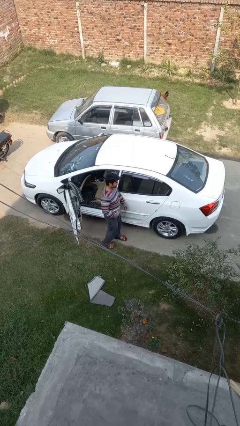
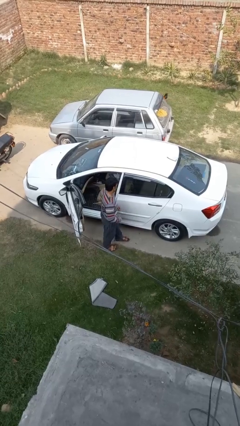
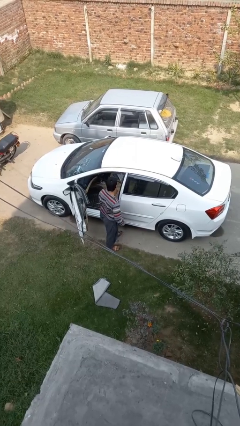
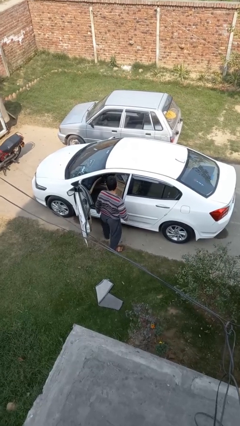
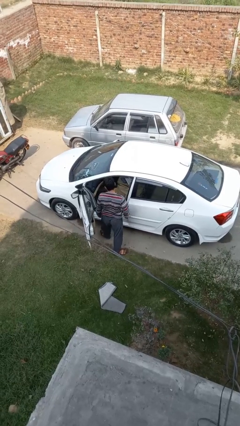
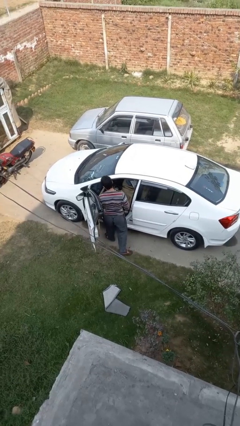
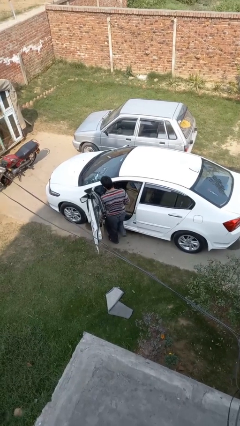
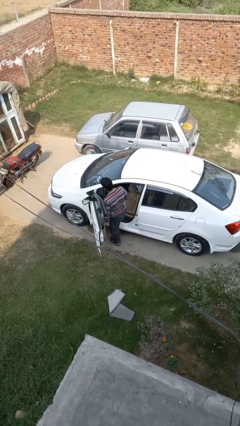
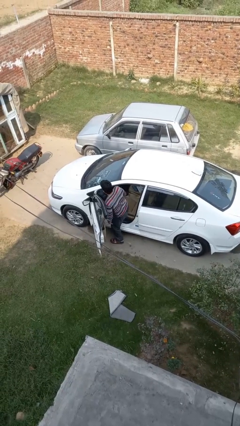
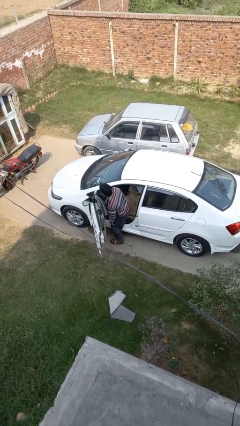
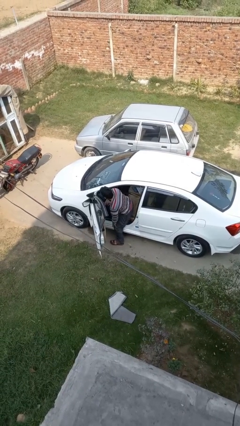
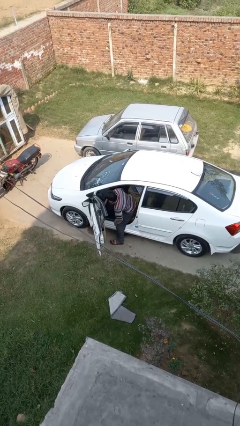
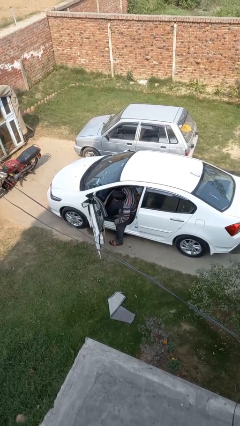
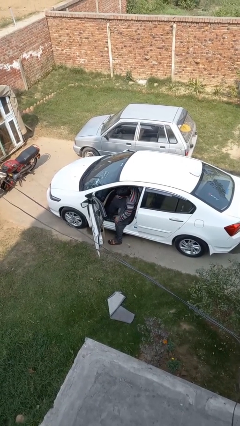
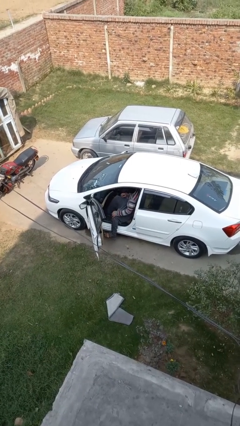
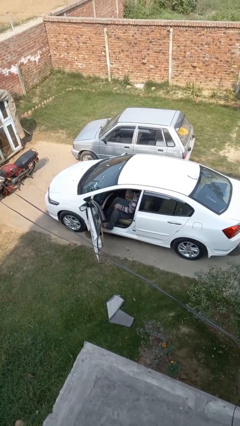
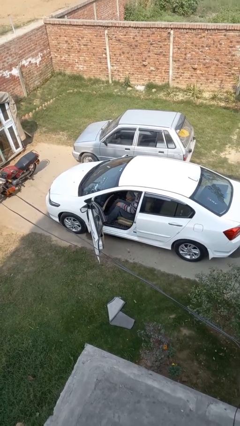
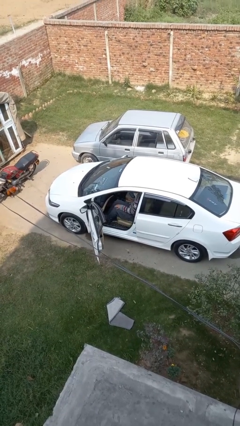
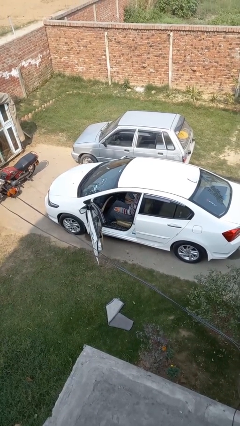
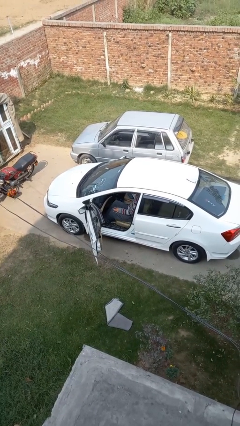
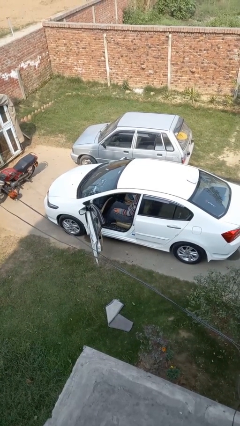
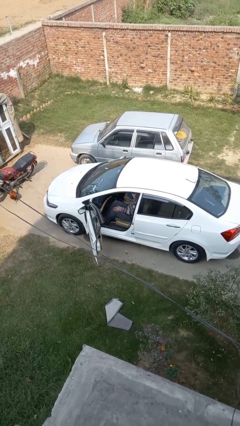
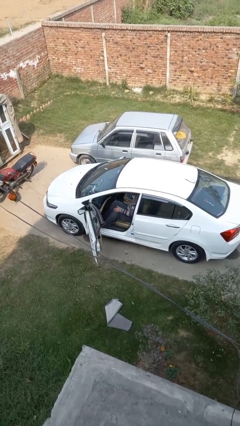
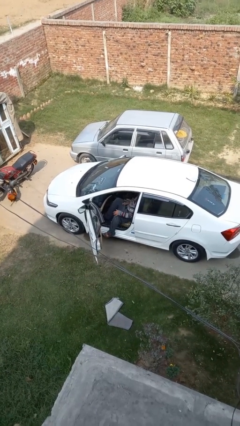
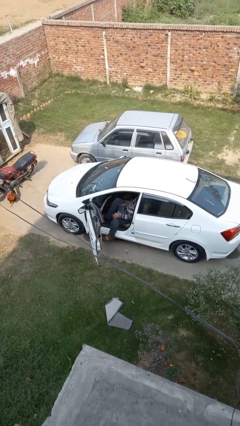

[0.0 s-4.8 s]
person enters car

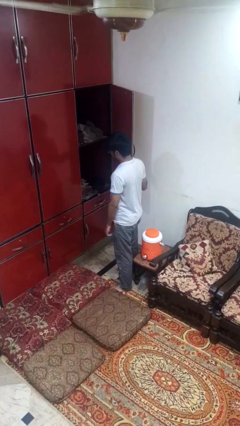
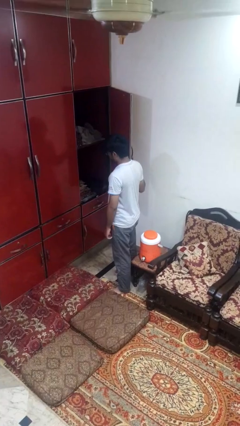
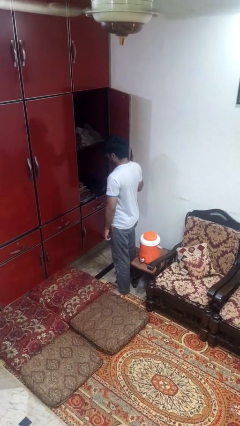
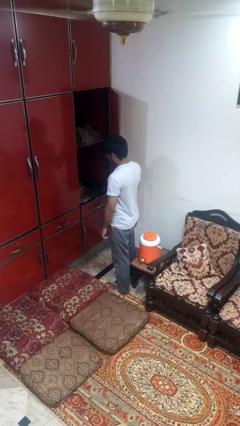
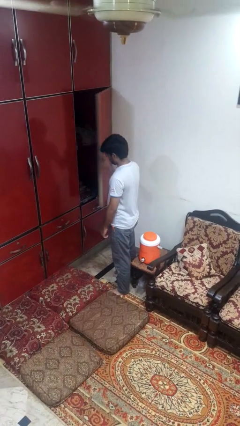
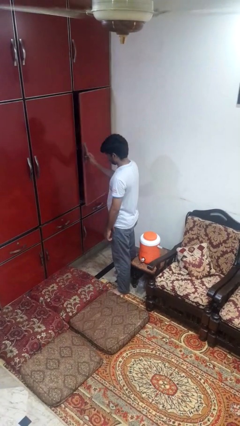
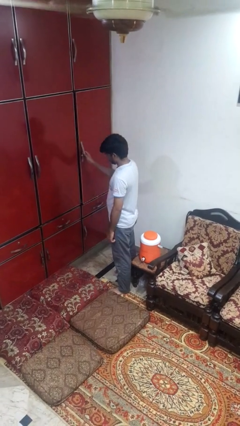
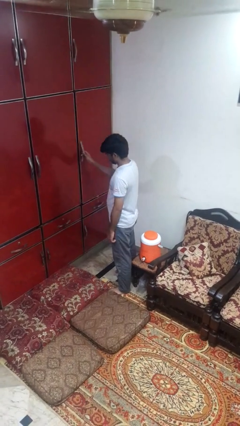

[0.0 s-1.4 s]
person closes cabinet

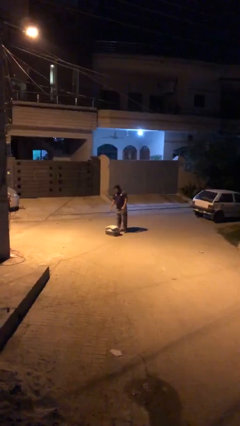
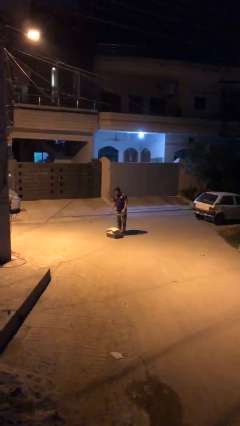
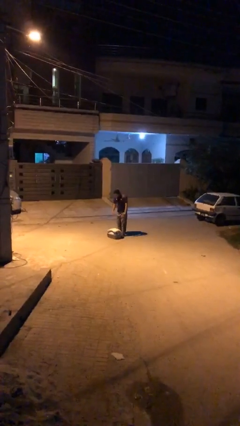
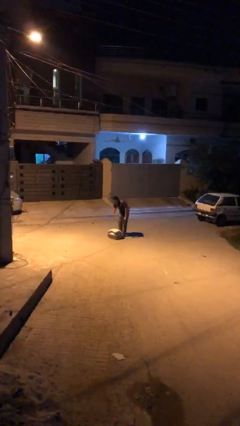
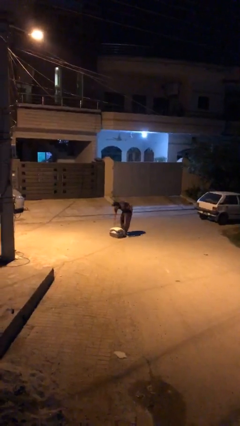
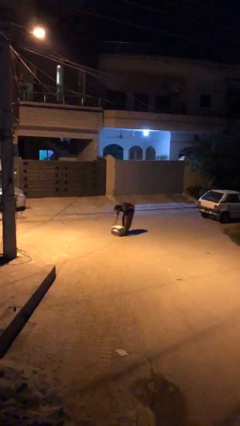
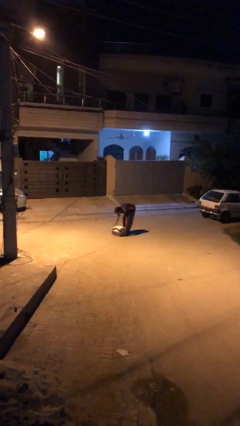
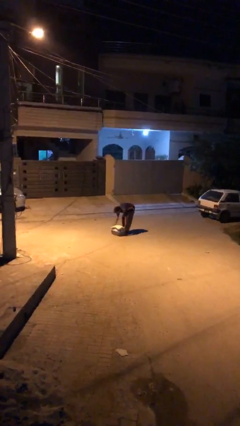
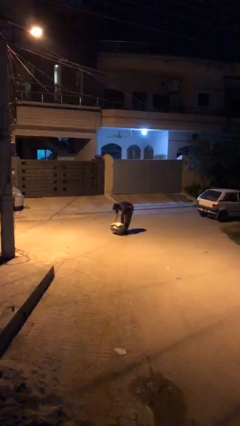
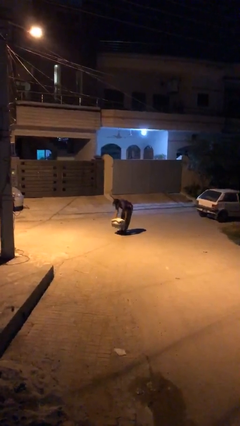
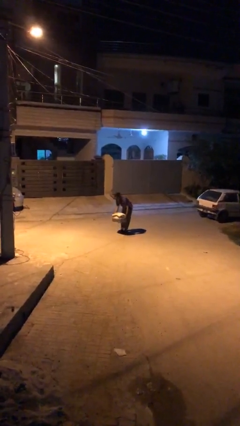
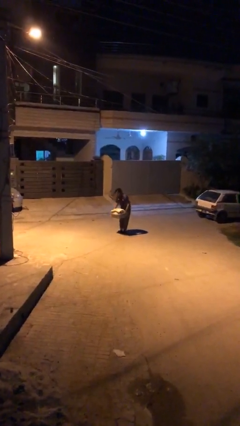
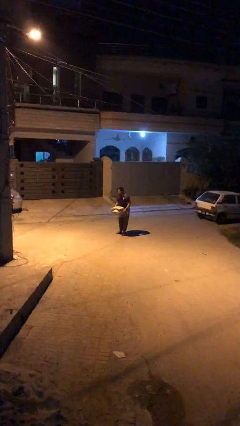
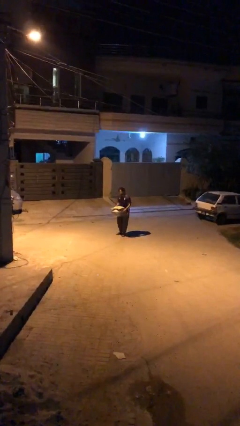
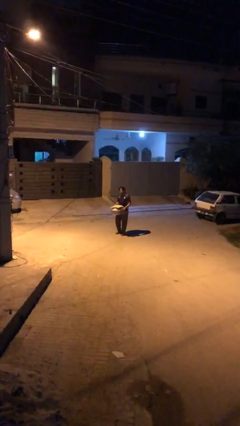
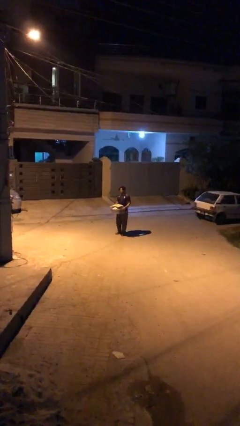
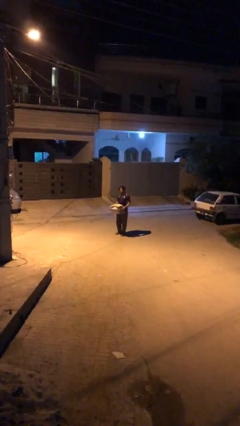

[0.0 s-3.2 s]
person picks up object from floor

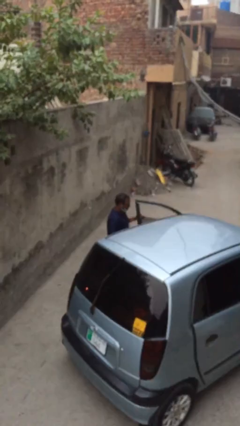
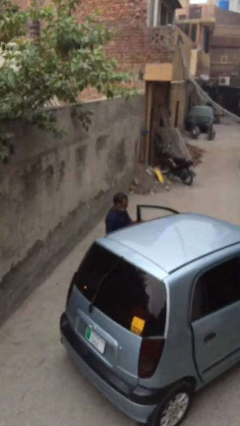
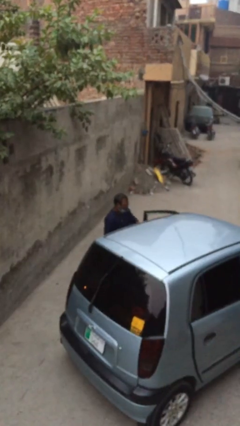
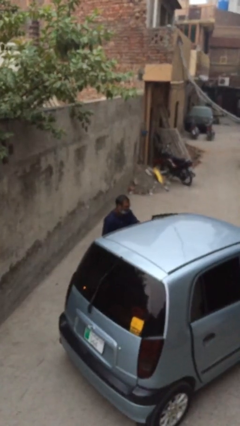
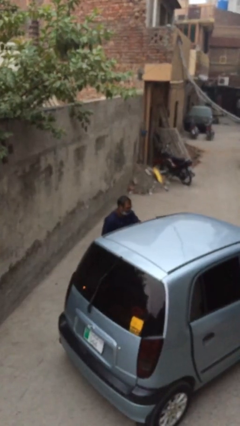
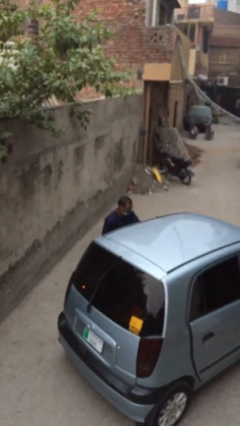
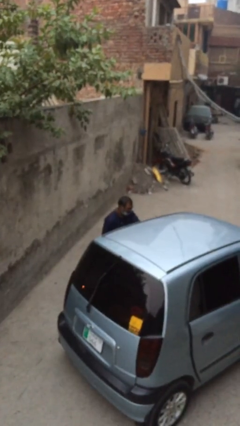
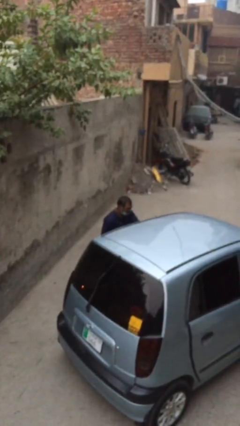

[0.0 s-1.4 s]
person closes car door

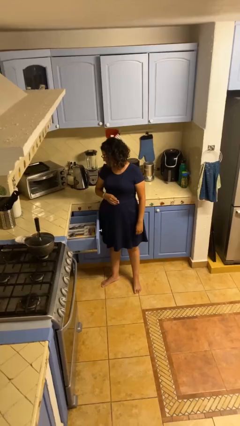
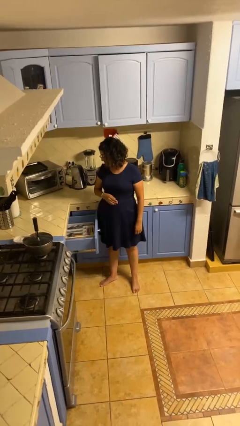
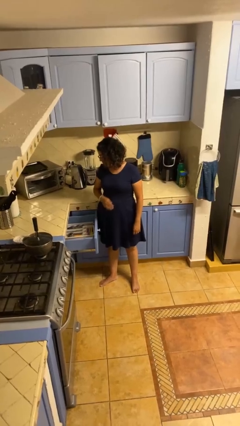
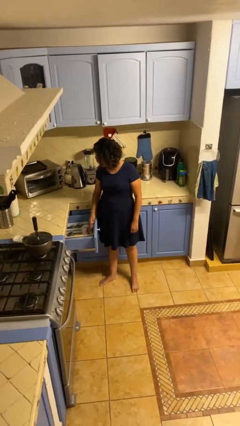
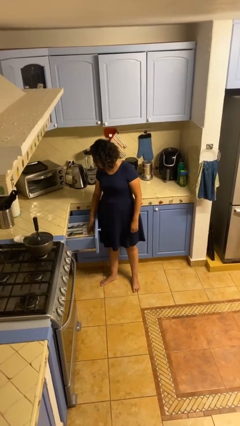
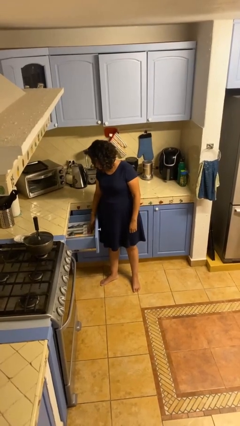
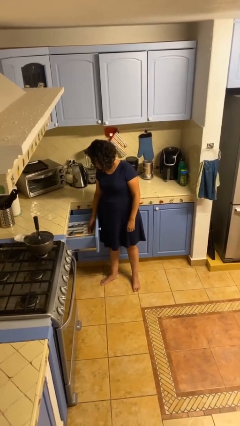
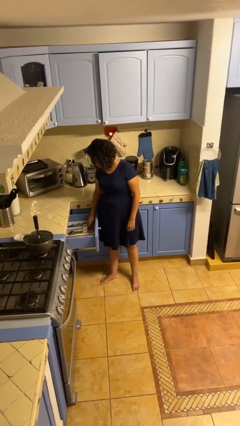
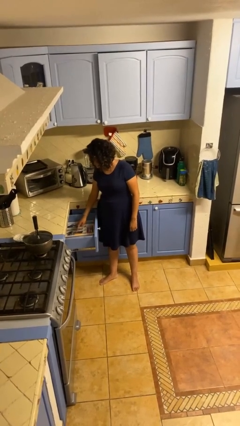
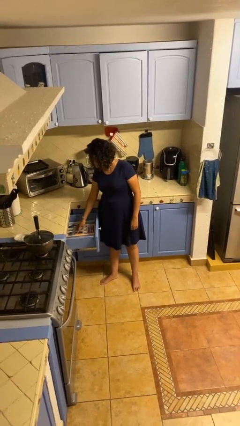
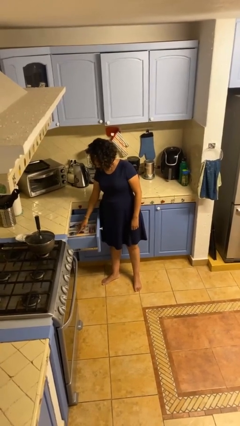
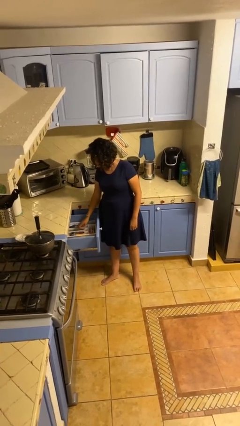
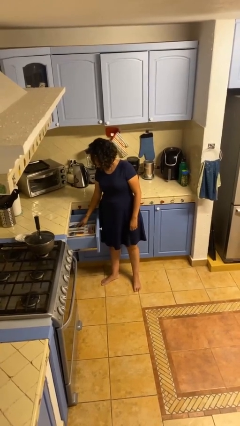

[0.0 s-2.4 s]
person searches in kitchen drawer

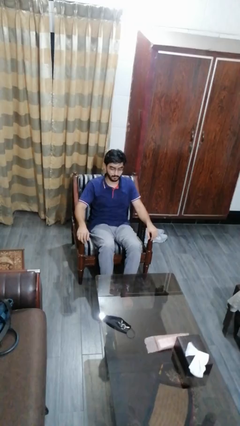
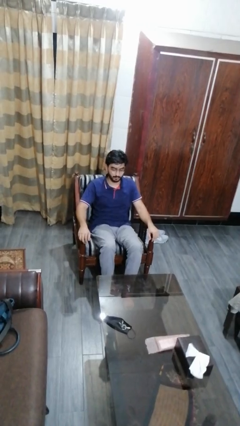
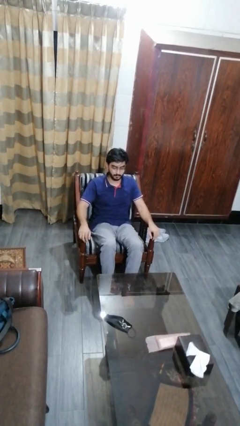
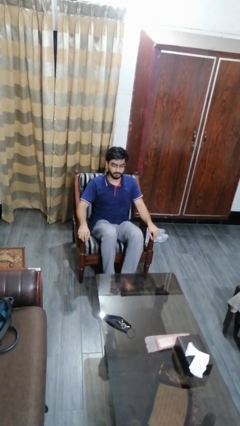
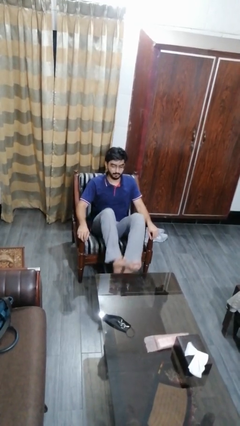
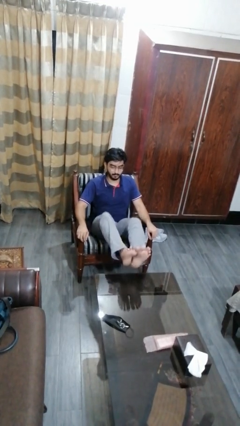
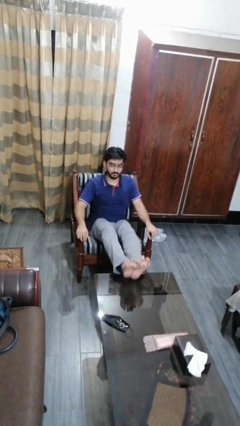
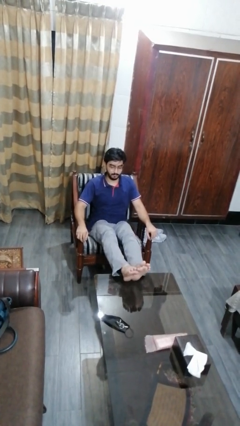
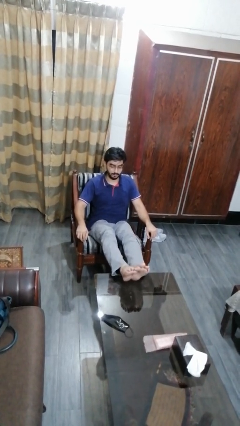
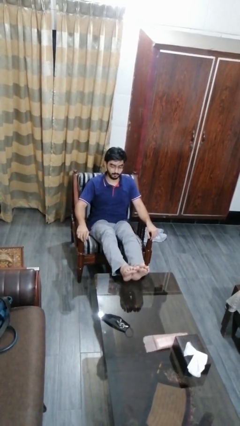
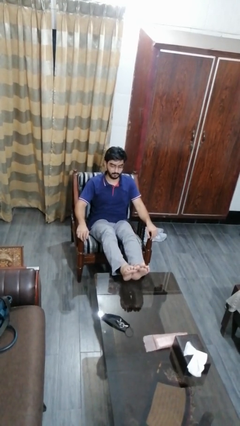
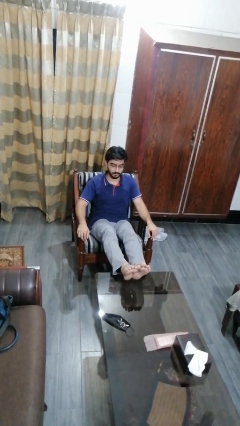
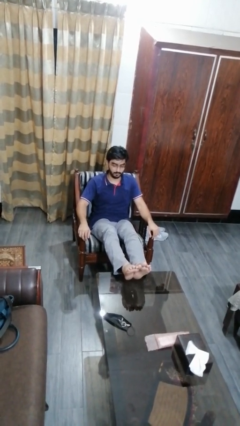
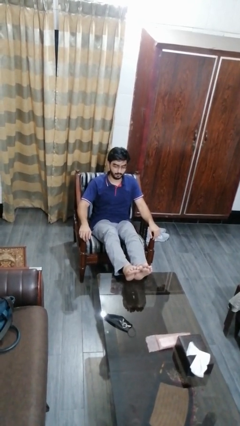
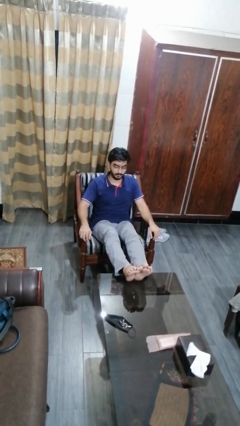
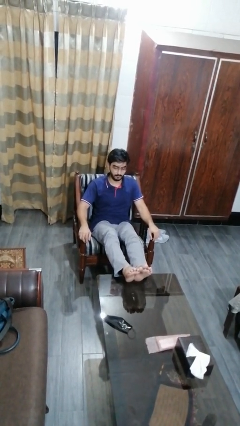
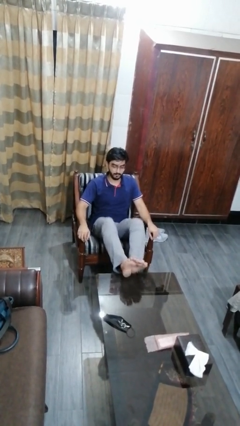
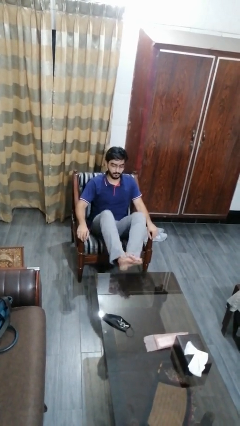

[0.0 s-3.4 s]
person puts feet up

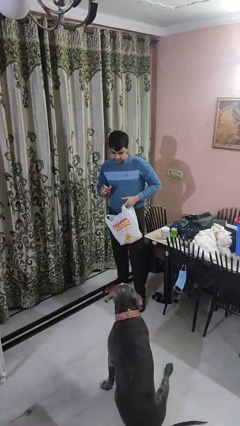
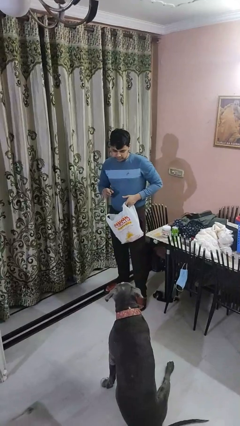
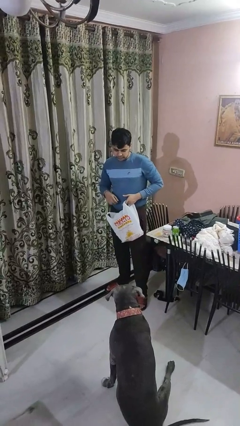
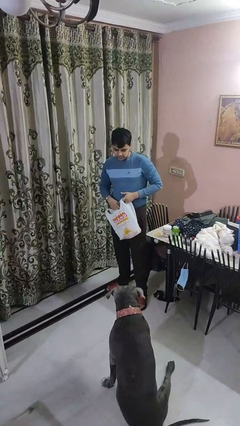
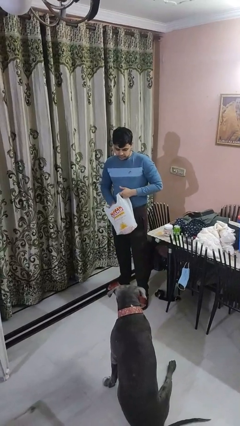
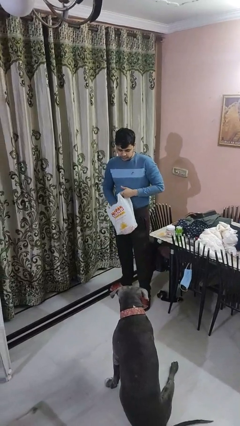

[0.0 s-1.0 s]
person throws object to dog
